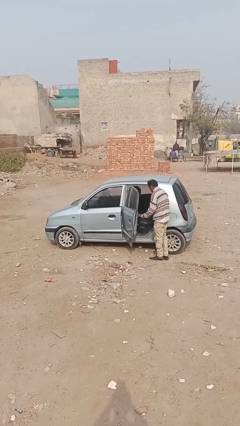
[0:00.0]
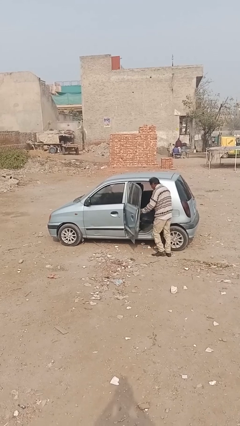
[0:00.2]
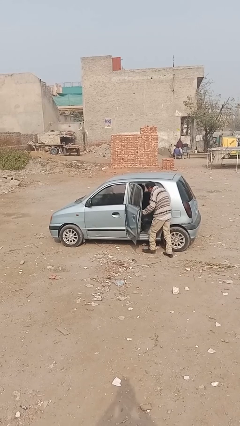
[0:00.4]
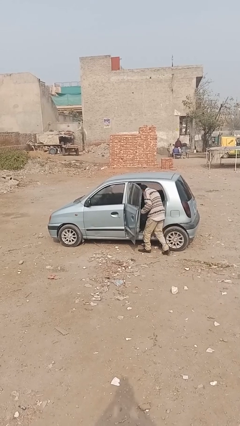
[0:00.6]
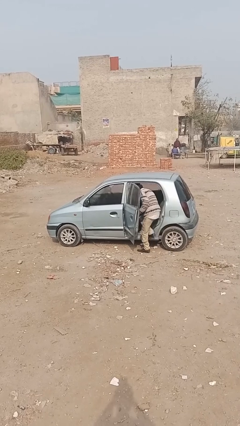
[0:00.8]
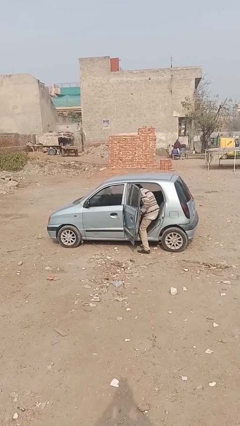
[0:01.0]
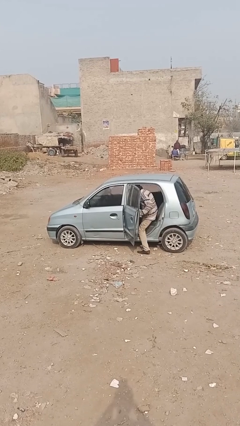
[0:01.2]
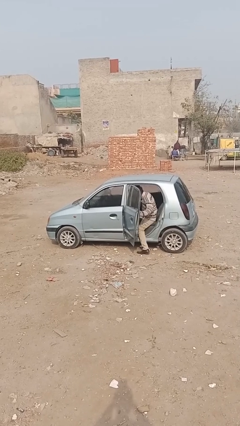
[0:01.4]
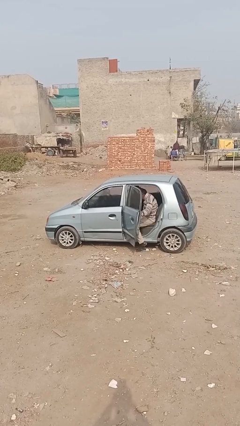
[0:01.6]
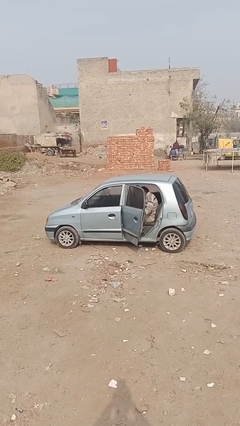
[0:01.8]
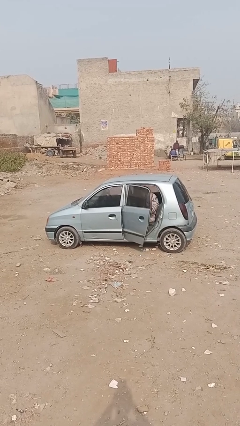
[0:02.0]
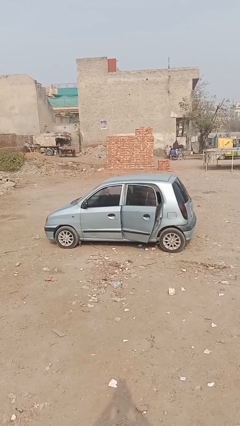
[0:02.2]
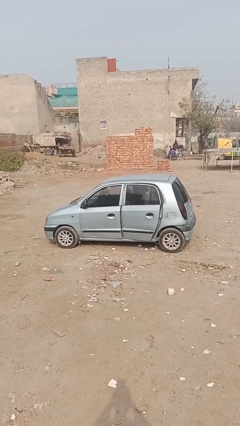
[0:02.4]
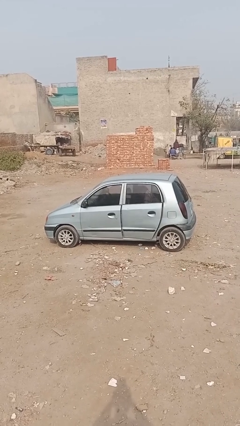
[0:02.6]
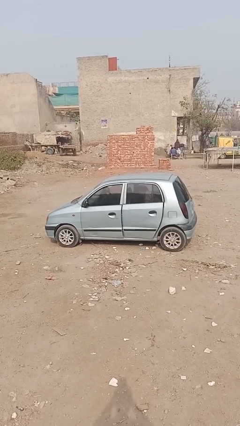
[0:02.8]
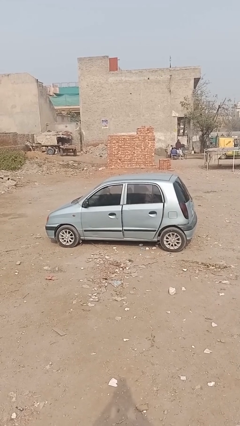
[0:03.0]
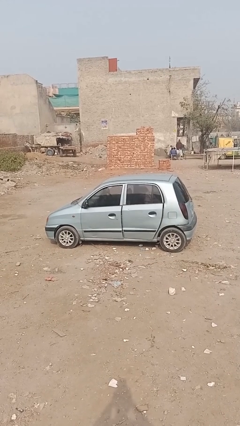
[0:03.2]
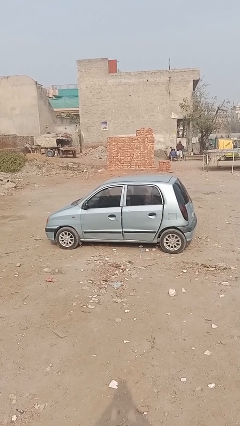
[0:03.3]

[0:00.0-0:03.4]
car picks up person

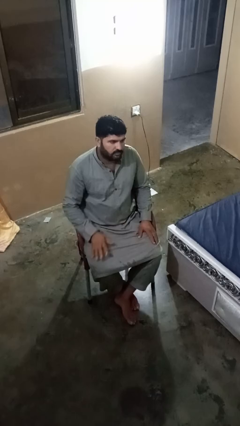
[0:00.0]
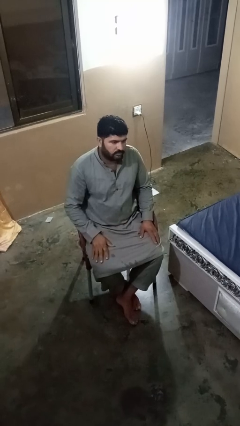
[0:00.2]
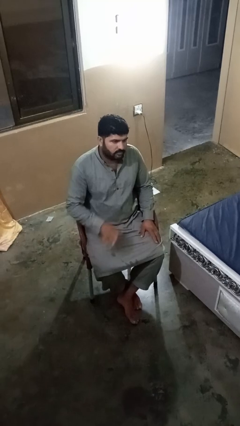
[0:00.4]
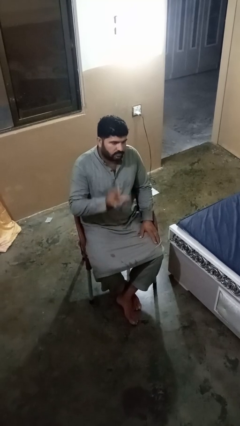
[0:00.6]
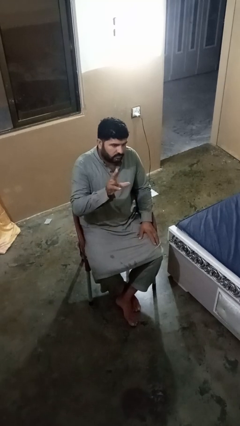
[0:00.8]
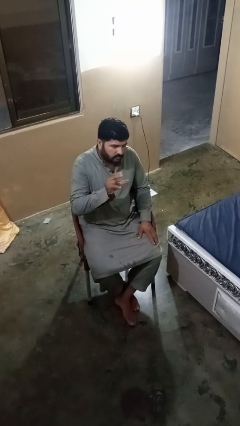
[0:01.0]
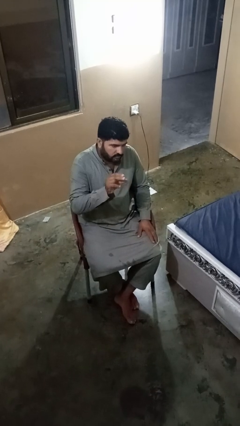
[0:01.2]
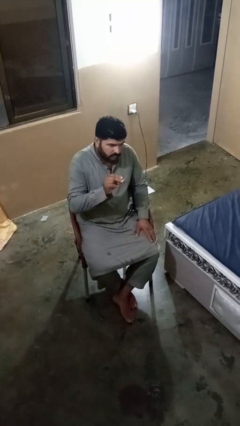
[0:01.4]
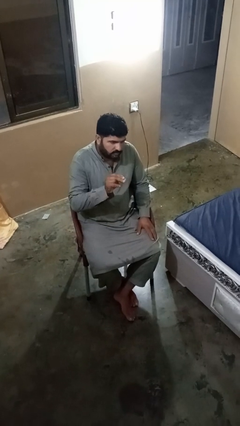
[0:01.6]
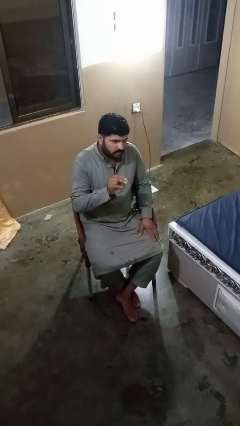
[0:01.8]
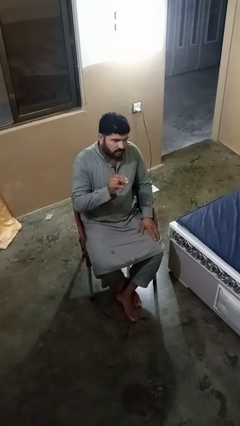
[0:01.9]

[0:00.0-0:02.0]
person gestures zoom in

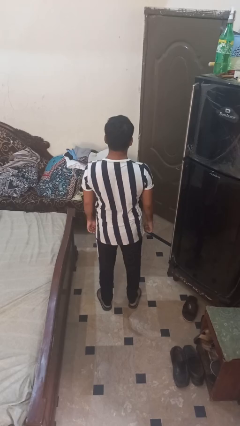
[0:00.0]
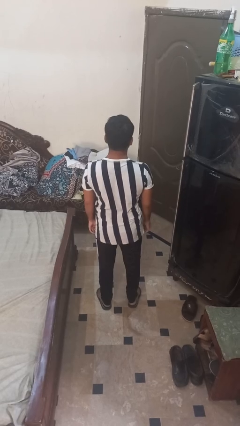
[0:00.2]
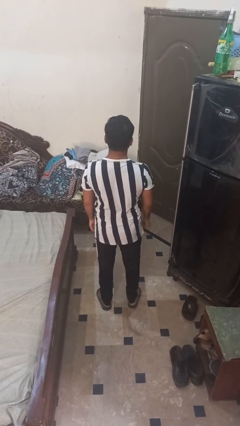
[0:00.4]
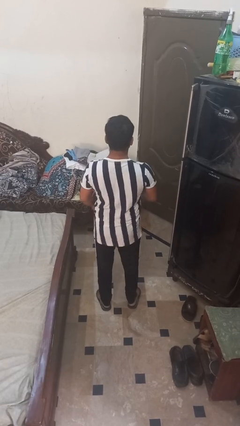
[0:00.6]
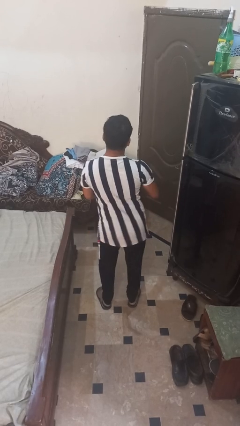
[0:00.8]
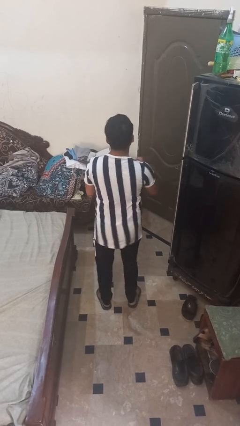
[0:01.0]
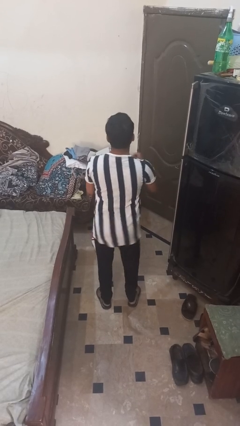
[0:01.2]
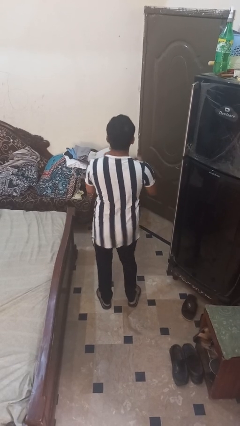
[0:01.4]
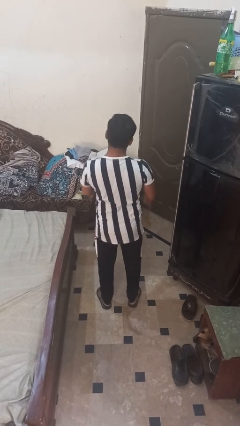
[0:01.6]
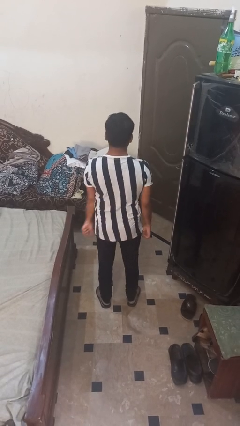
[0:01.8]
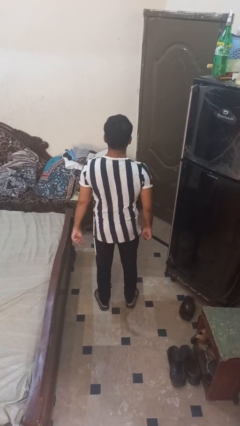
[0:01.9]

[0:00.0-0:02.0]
person wiggles hips

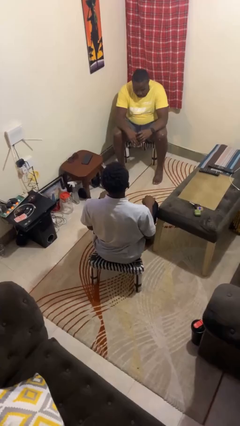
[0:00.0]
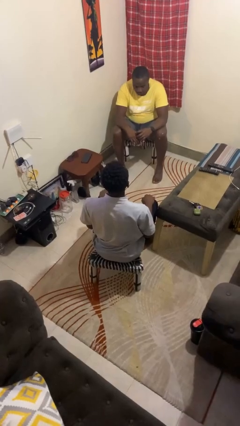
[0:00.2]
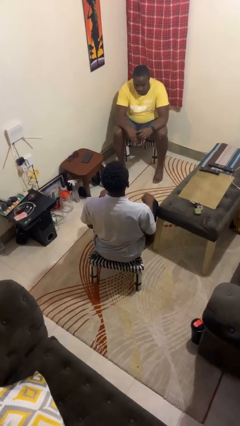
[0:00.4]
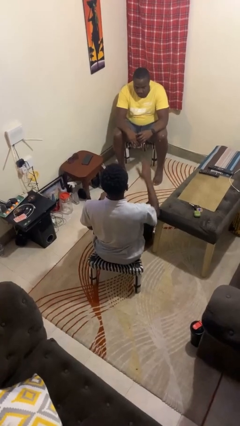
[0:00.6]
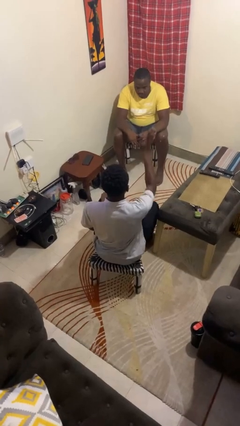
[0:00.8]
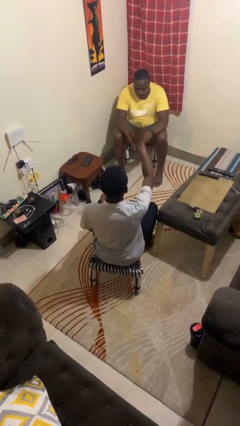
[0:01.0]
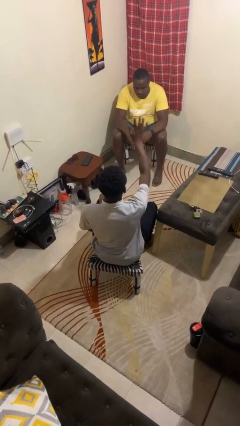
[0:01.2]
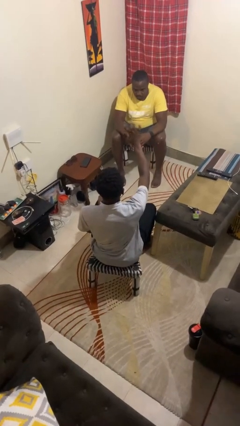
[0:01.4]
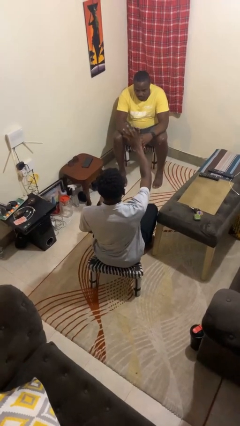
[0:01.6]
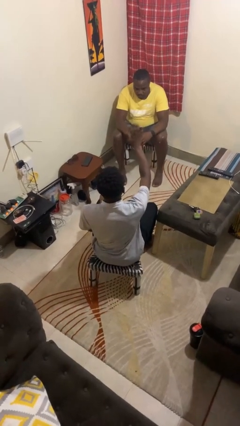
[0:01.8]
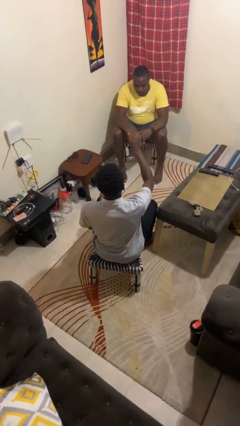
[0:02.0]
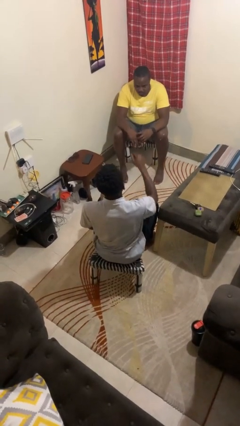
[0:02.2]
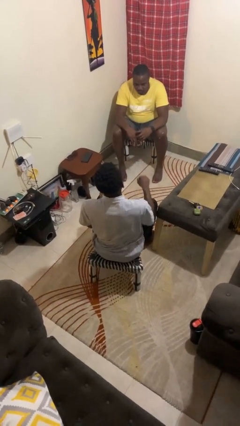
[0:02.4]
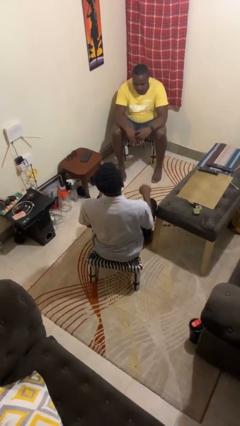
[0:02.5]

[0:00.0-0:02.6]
person waves at person

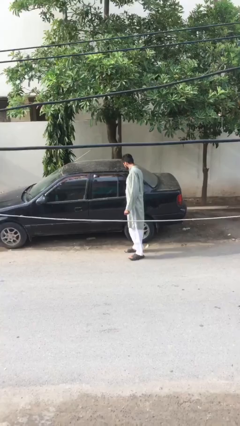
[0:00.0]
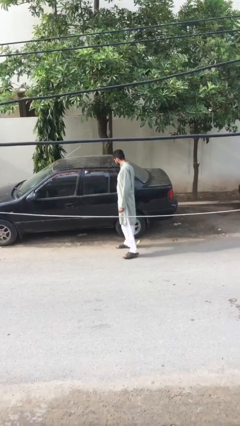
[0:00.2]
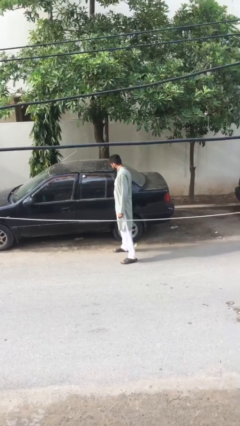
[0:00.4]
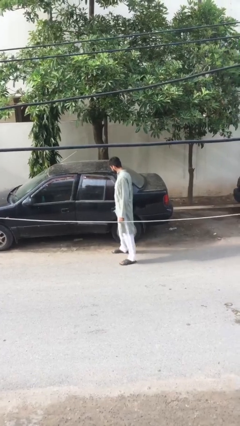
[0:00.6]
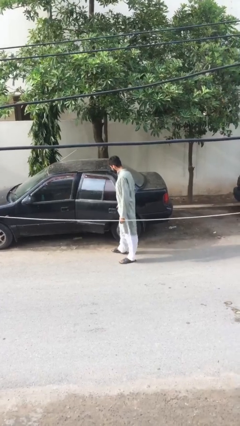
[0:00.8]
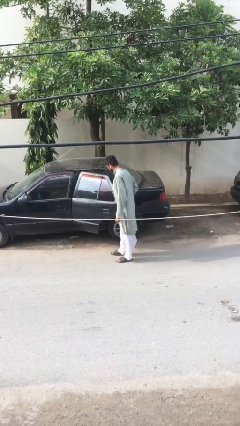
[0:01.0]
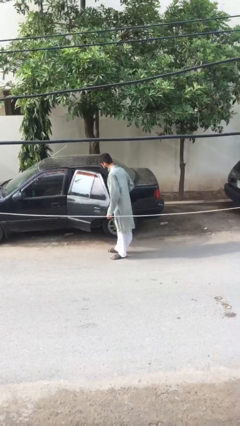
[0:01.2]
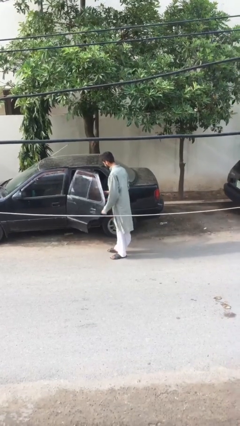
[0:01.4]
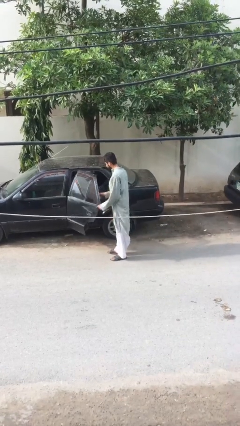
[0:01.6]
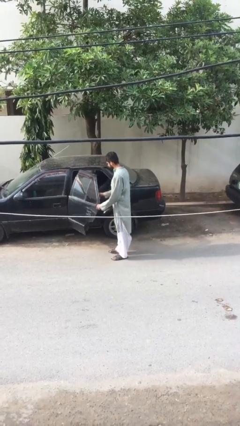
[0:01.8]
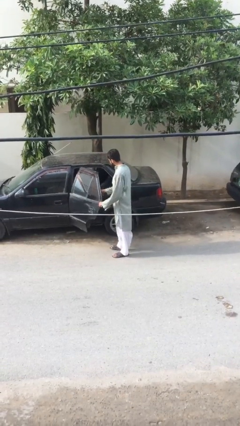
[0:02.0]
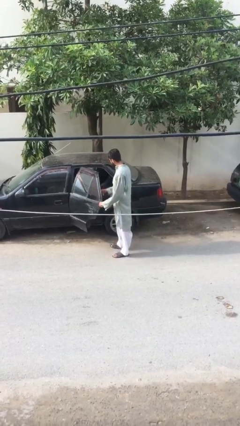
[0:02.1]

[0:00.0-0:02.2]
person opens car door

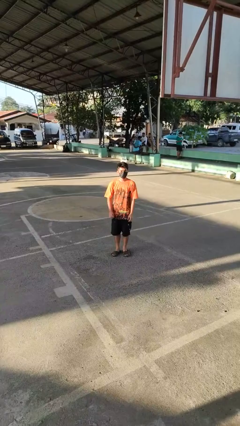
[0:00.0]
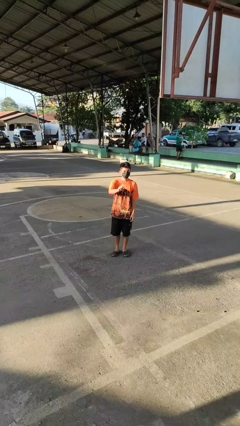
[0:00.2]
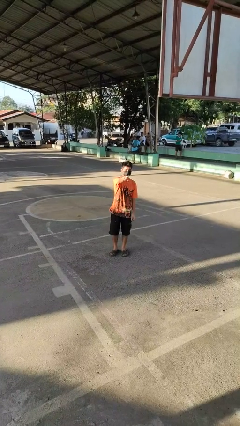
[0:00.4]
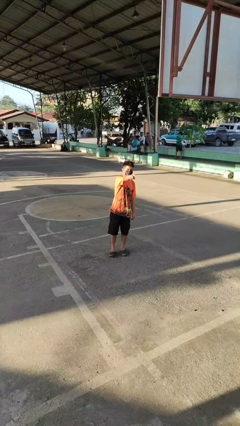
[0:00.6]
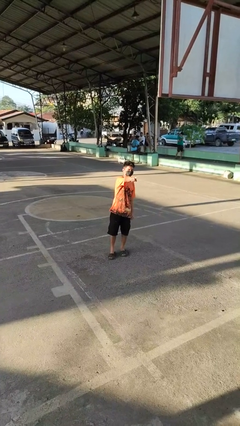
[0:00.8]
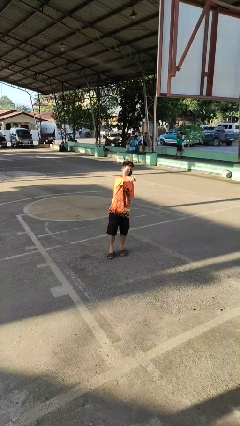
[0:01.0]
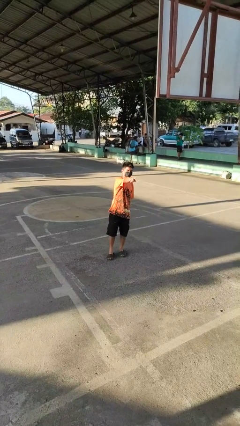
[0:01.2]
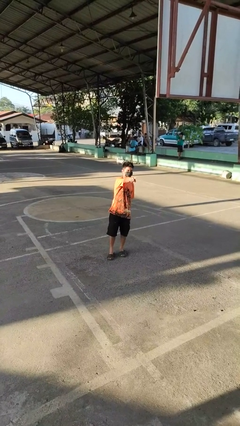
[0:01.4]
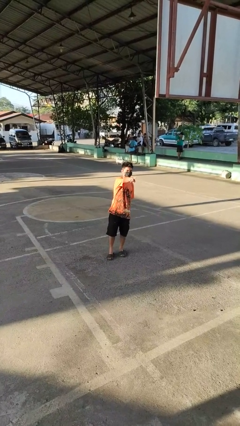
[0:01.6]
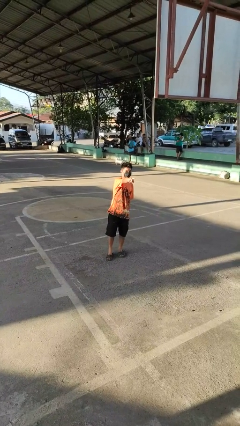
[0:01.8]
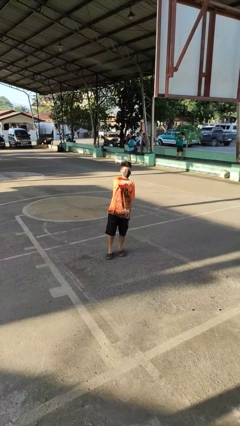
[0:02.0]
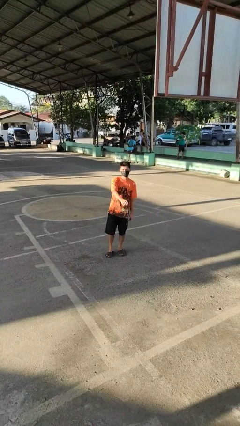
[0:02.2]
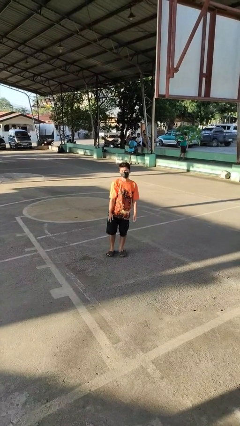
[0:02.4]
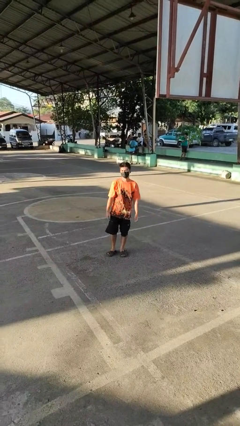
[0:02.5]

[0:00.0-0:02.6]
person points at person

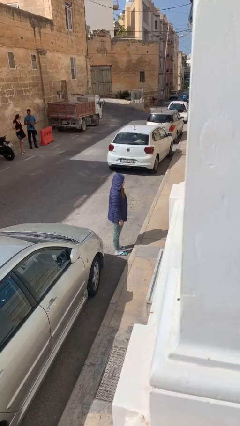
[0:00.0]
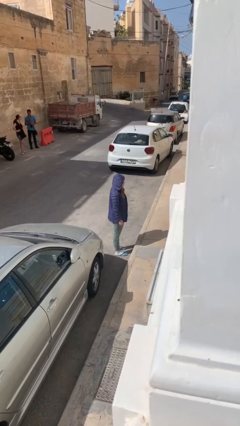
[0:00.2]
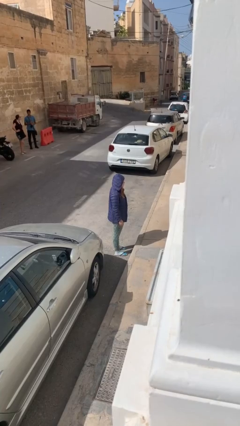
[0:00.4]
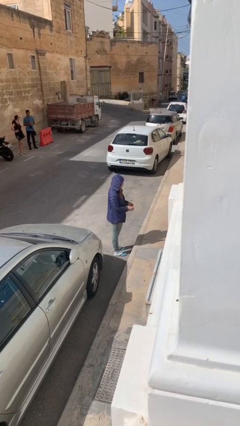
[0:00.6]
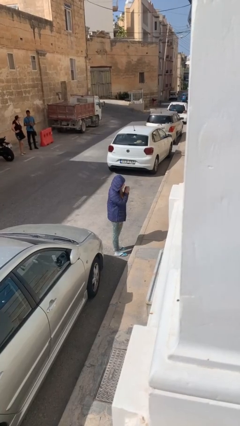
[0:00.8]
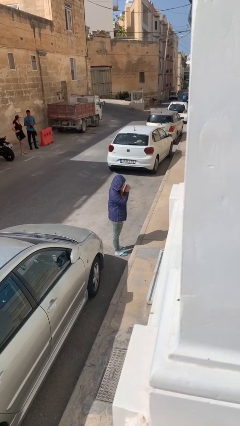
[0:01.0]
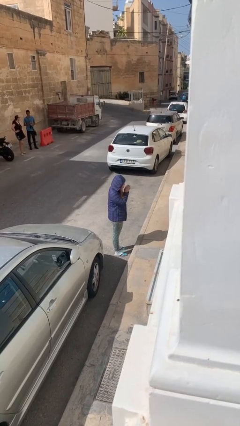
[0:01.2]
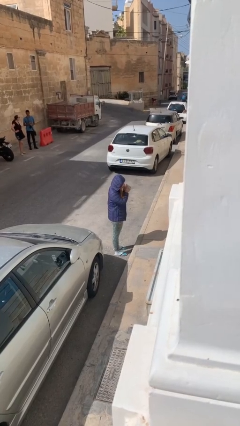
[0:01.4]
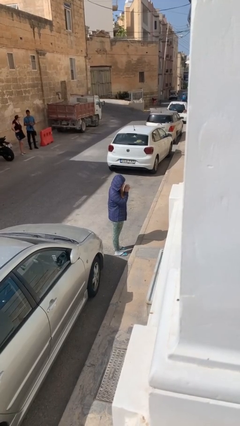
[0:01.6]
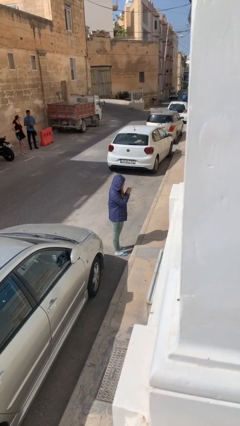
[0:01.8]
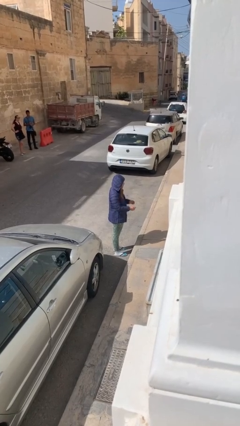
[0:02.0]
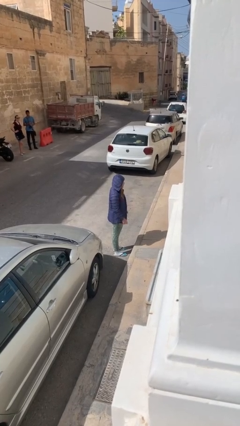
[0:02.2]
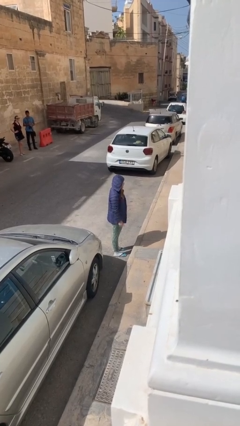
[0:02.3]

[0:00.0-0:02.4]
person blows into hands

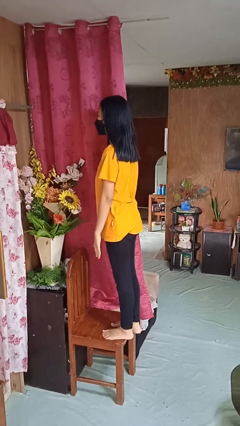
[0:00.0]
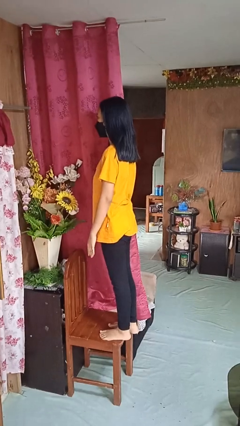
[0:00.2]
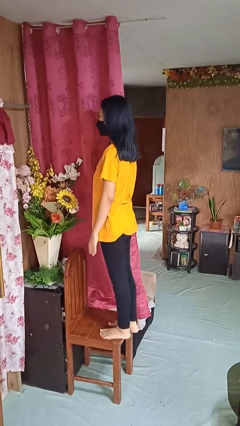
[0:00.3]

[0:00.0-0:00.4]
person climbs on chair
